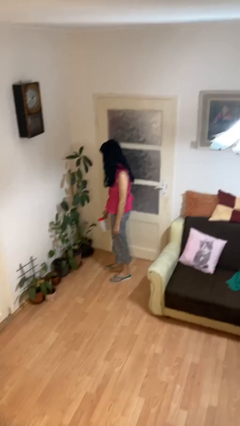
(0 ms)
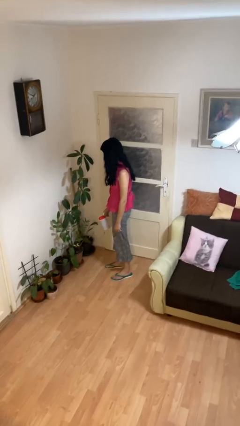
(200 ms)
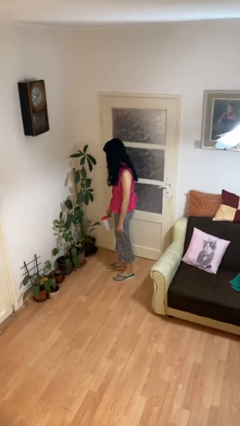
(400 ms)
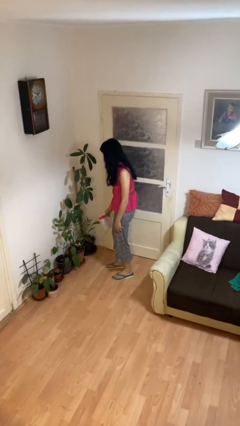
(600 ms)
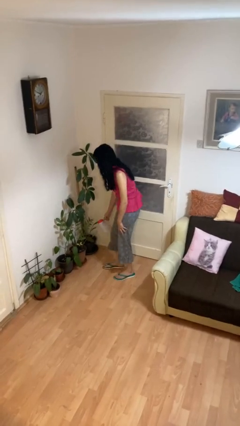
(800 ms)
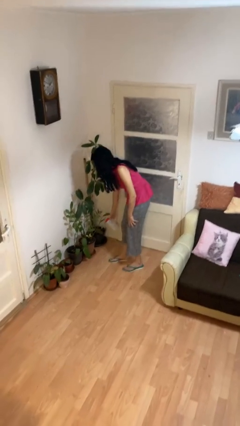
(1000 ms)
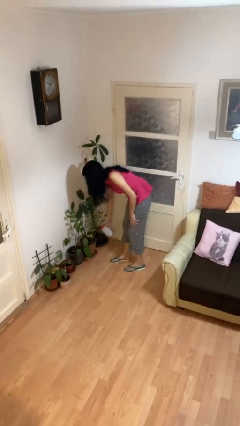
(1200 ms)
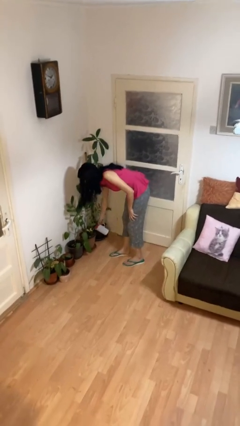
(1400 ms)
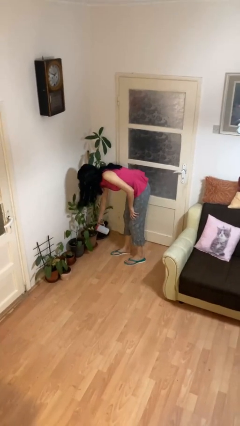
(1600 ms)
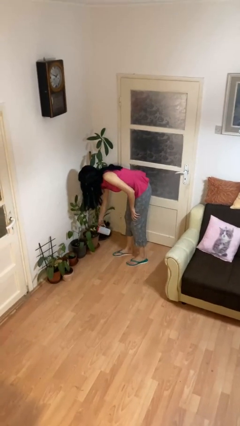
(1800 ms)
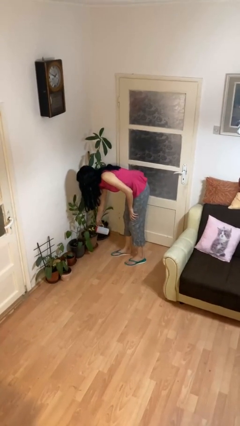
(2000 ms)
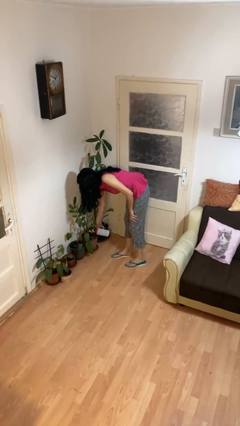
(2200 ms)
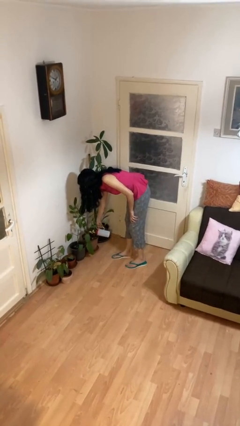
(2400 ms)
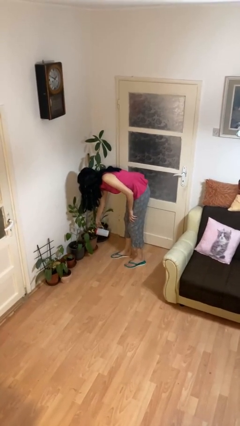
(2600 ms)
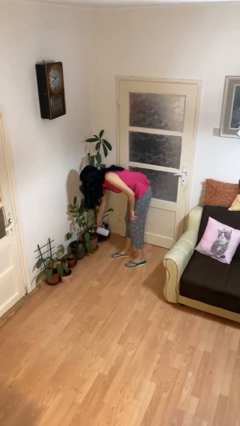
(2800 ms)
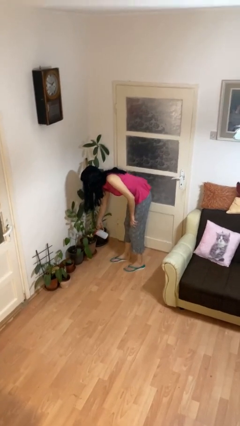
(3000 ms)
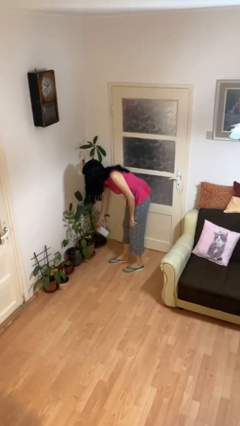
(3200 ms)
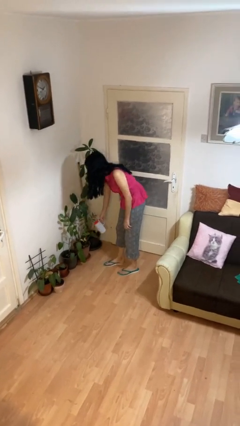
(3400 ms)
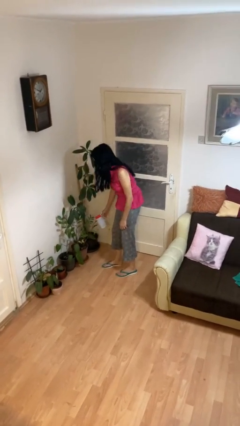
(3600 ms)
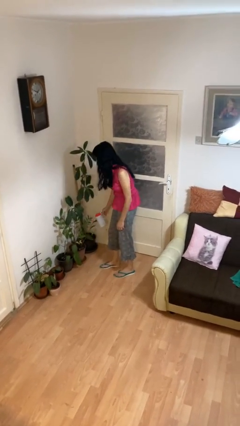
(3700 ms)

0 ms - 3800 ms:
person waters houseplant

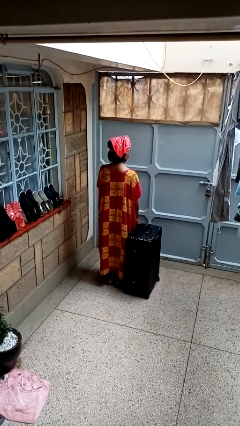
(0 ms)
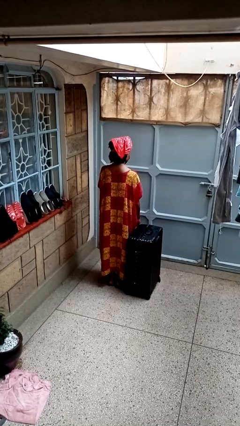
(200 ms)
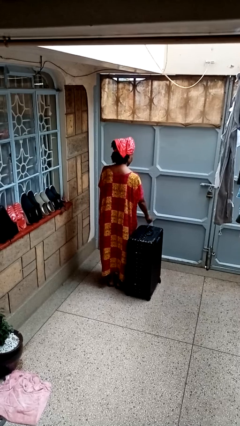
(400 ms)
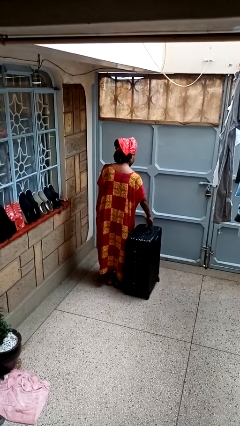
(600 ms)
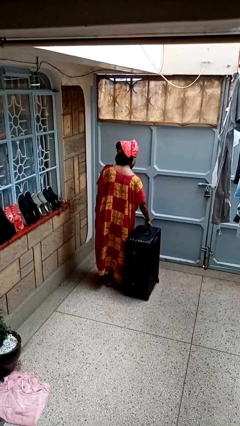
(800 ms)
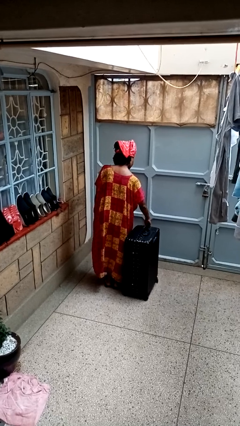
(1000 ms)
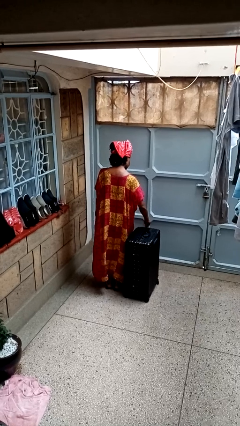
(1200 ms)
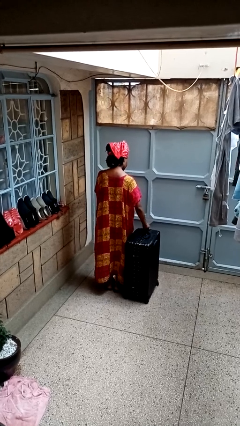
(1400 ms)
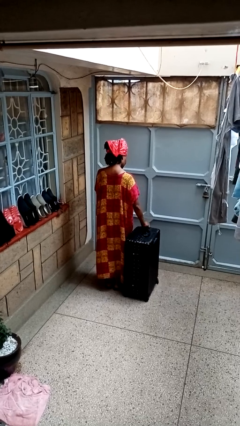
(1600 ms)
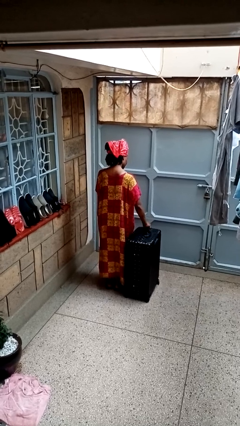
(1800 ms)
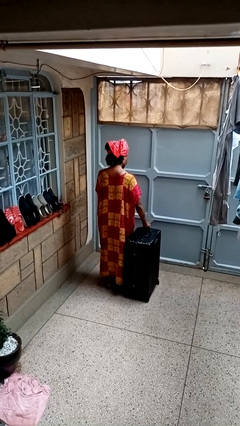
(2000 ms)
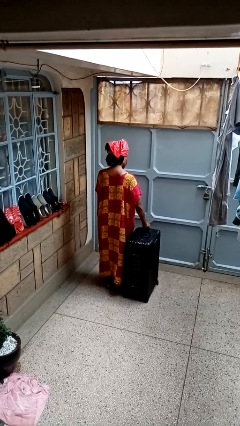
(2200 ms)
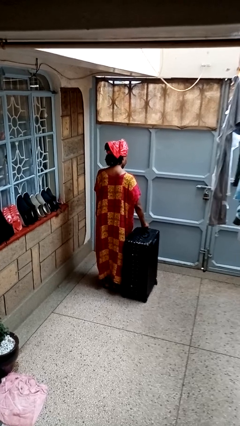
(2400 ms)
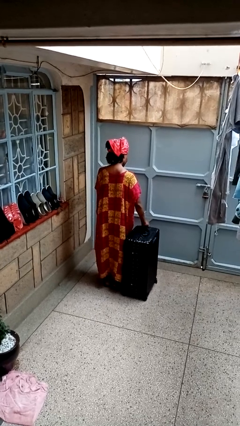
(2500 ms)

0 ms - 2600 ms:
person opens suitcase

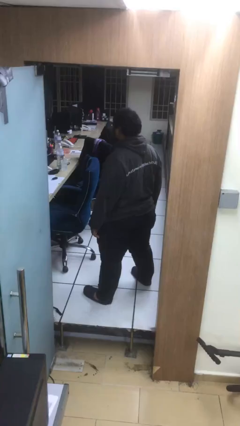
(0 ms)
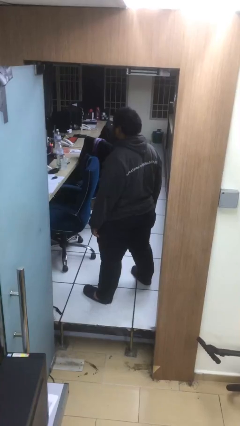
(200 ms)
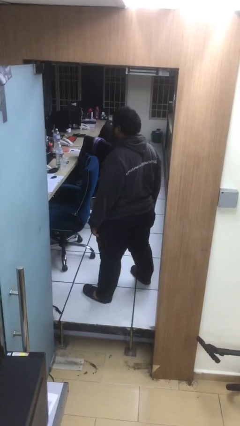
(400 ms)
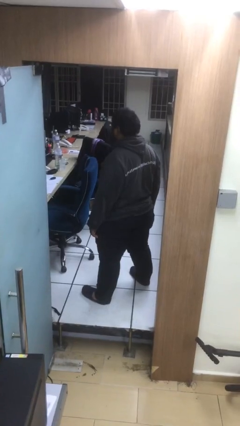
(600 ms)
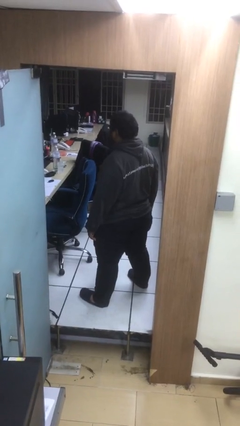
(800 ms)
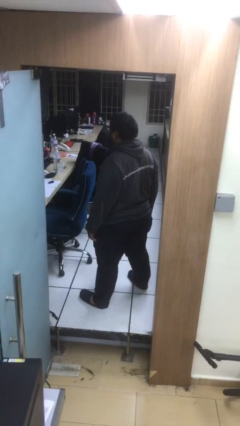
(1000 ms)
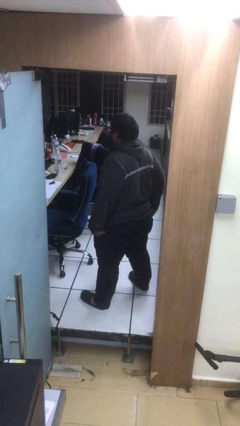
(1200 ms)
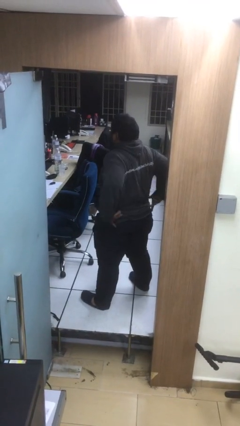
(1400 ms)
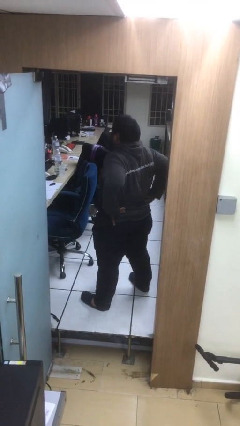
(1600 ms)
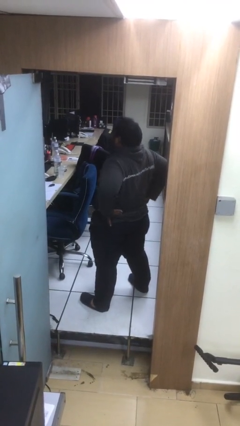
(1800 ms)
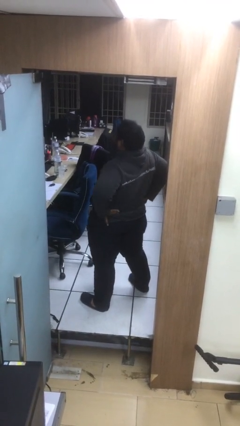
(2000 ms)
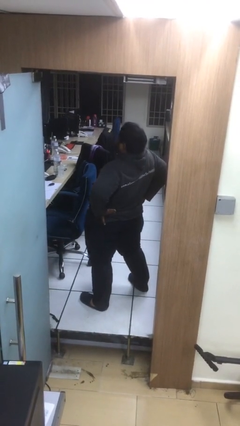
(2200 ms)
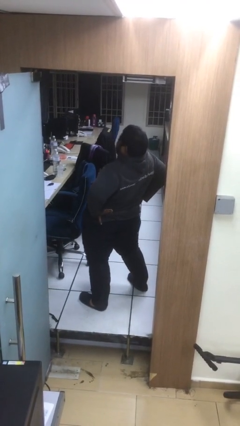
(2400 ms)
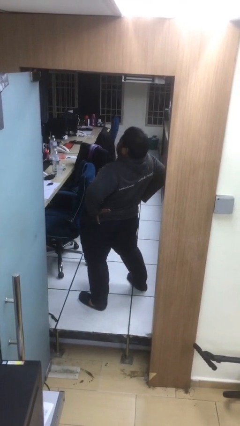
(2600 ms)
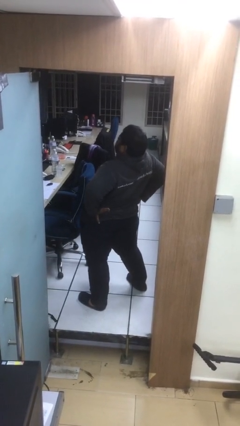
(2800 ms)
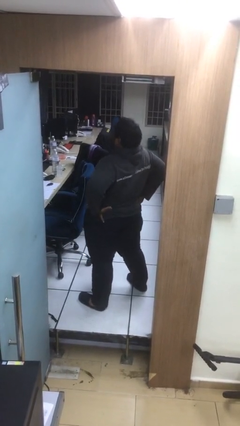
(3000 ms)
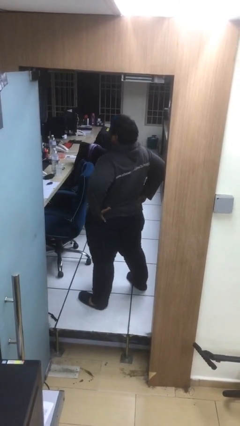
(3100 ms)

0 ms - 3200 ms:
person stretches back

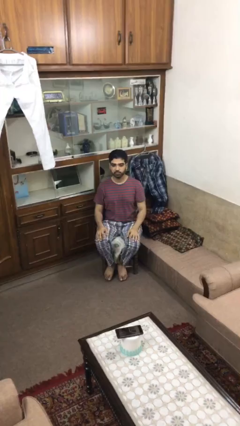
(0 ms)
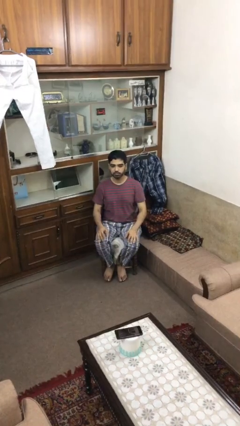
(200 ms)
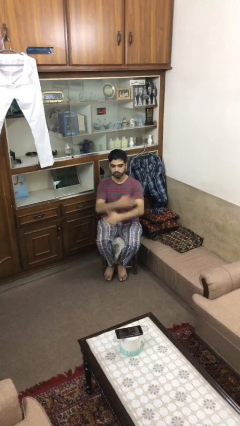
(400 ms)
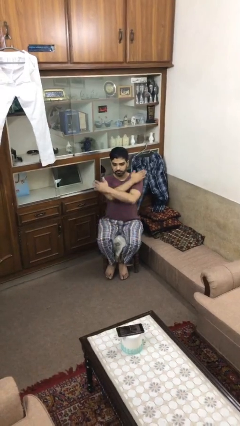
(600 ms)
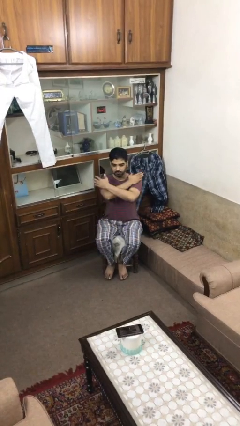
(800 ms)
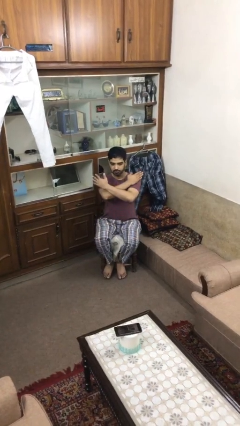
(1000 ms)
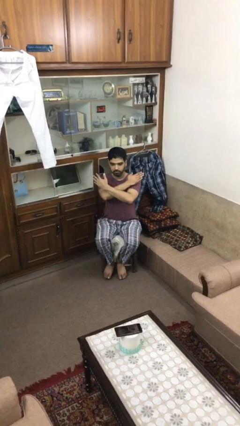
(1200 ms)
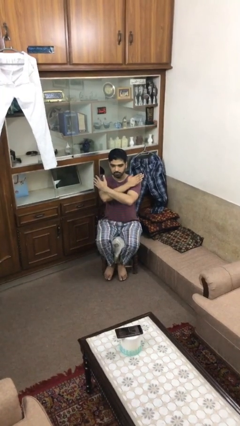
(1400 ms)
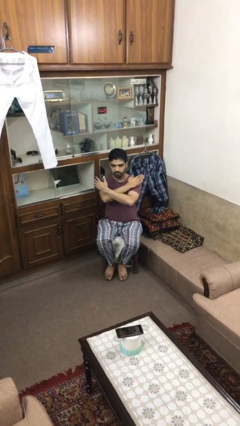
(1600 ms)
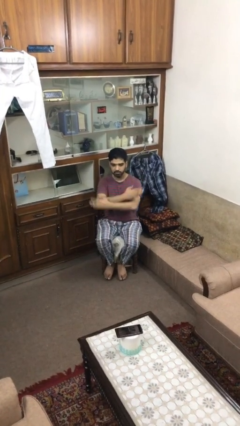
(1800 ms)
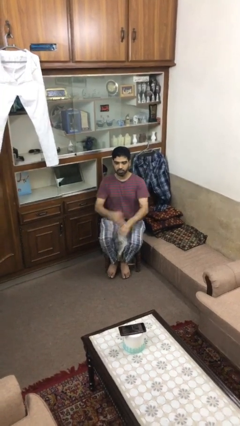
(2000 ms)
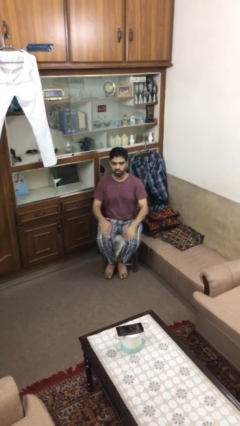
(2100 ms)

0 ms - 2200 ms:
person crosses arms

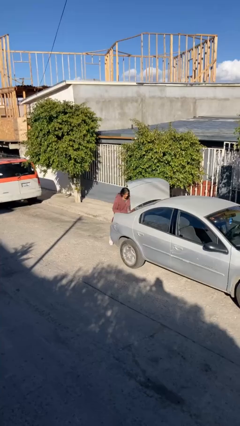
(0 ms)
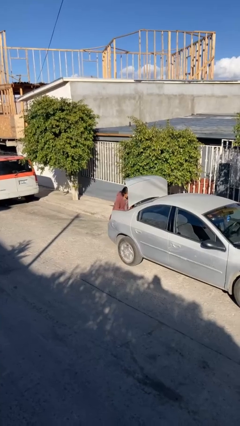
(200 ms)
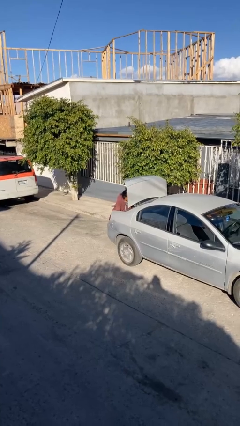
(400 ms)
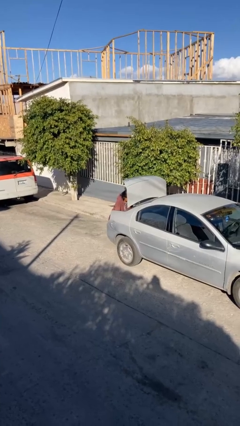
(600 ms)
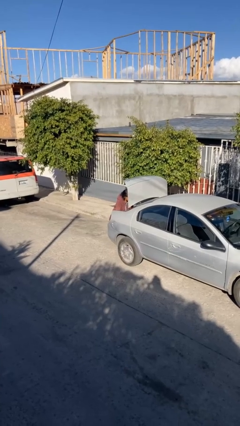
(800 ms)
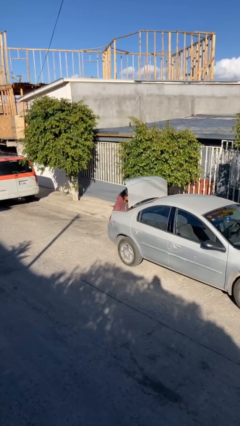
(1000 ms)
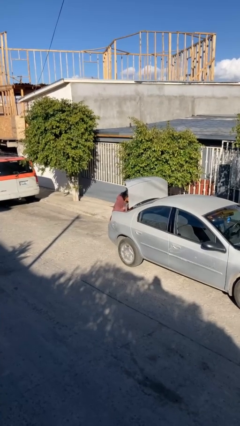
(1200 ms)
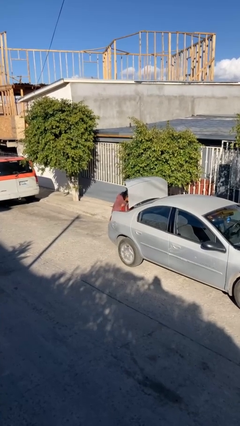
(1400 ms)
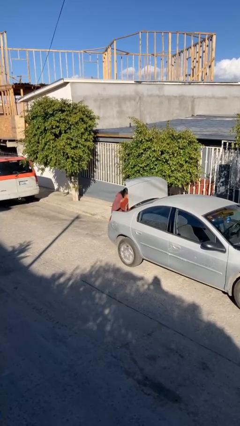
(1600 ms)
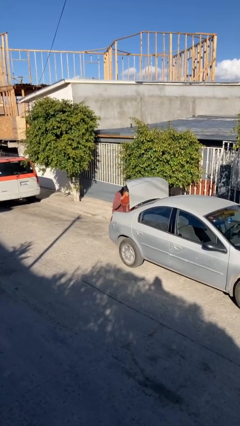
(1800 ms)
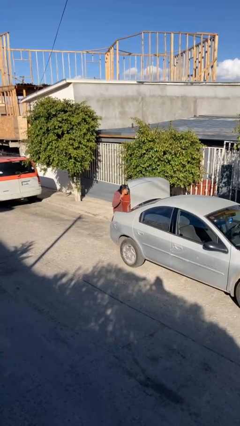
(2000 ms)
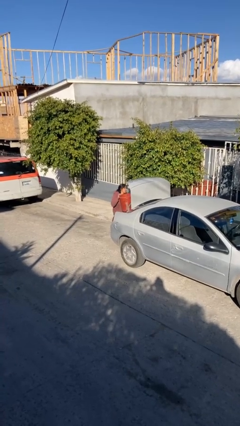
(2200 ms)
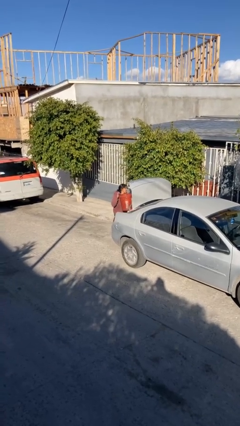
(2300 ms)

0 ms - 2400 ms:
person unloads car

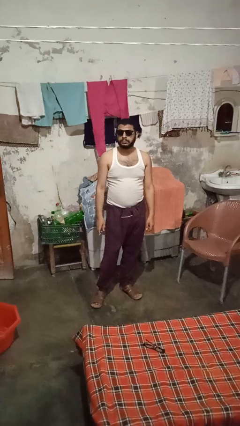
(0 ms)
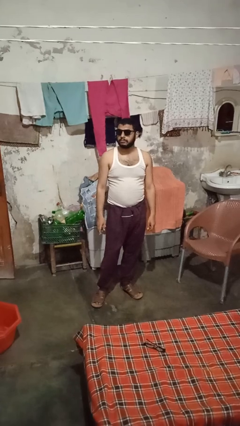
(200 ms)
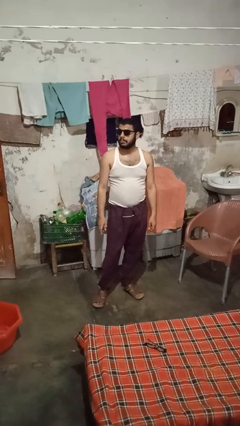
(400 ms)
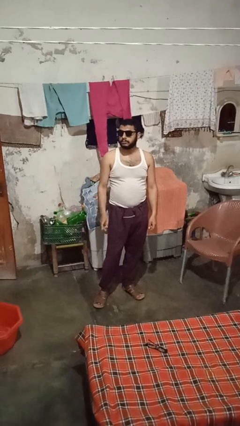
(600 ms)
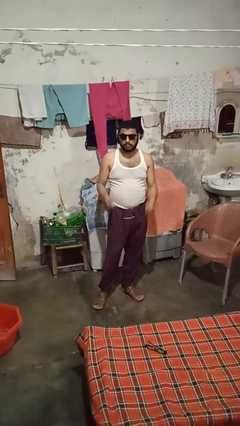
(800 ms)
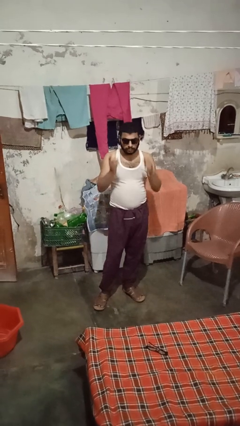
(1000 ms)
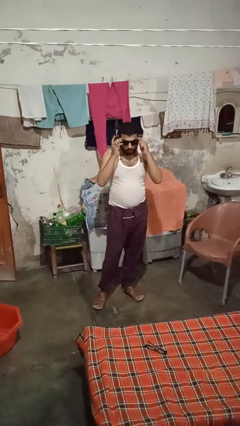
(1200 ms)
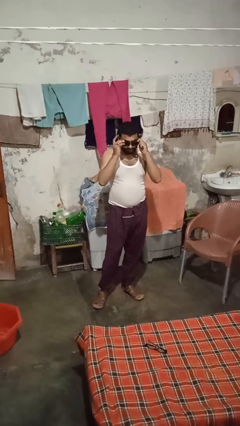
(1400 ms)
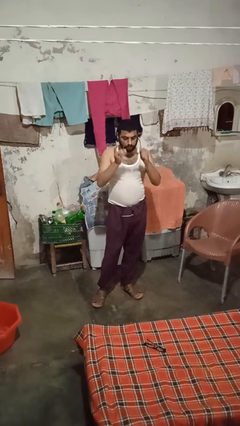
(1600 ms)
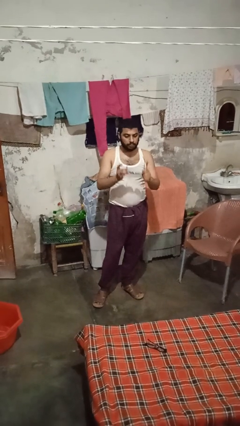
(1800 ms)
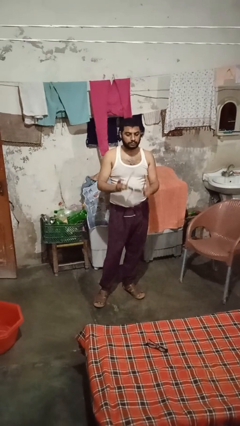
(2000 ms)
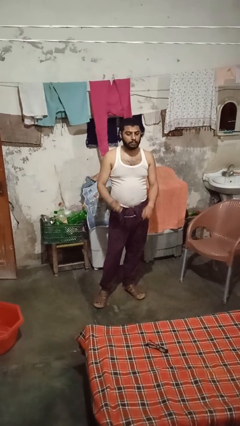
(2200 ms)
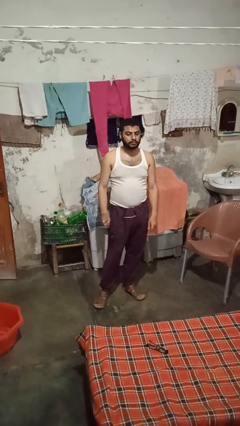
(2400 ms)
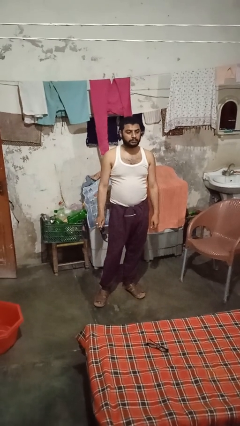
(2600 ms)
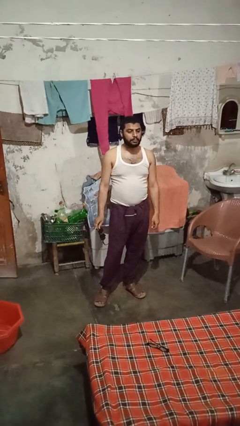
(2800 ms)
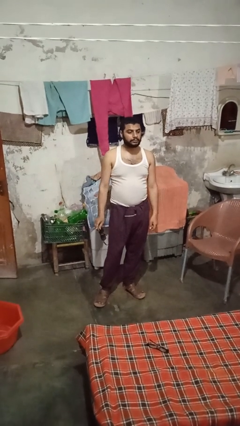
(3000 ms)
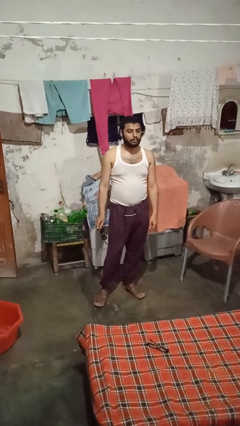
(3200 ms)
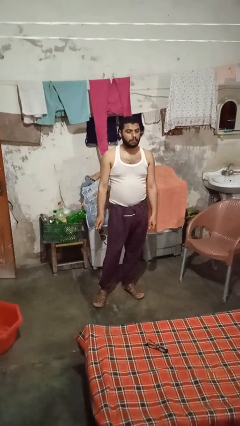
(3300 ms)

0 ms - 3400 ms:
person takes off sunglasses
